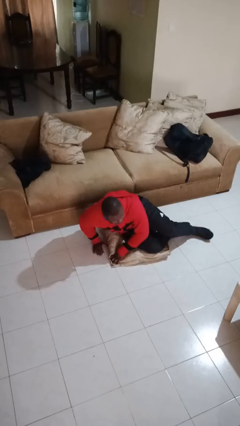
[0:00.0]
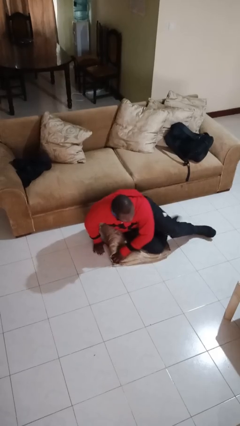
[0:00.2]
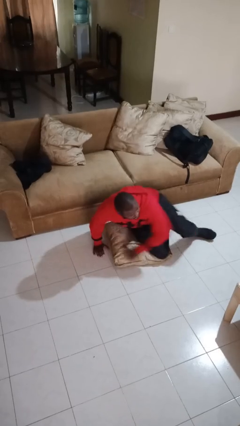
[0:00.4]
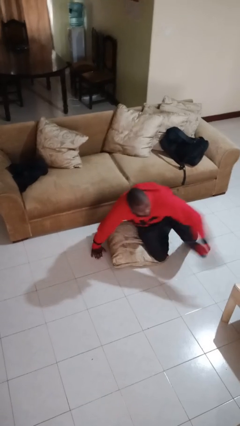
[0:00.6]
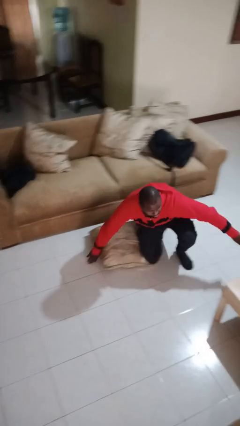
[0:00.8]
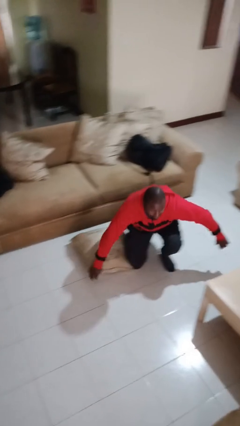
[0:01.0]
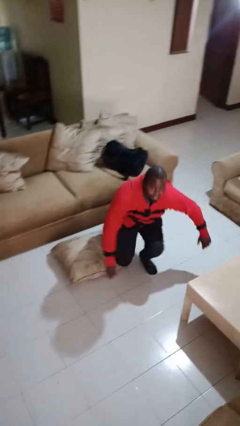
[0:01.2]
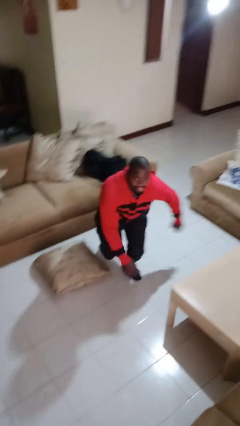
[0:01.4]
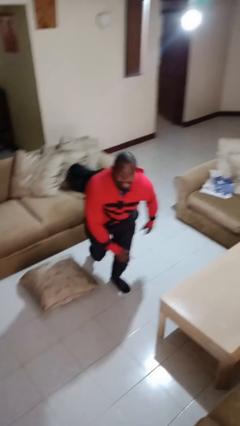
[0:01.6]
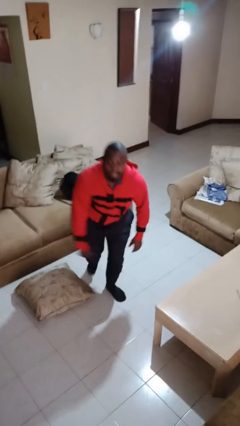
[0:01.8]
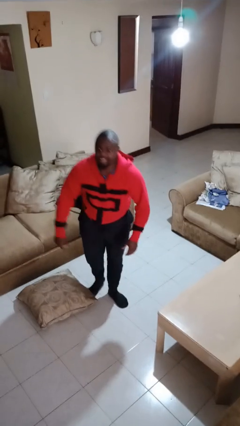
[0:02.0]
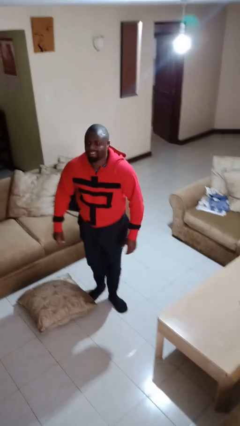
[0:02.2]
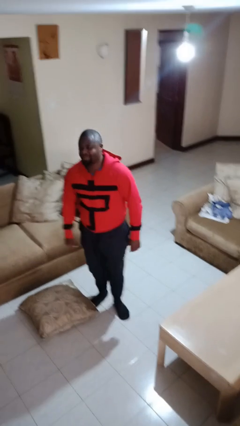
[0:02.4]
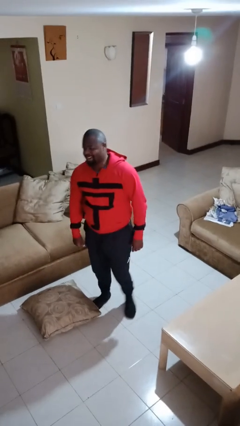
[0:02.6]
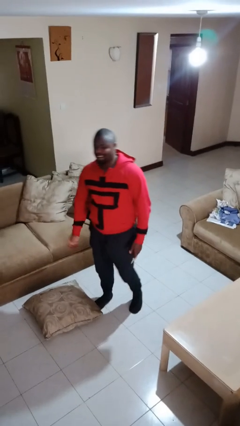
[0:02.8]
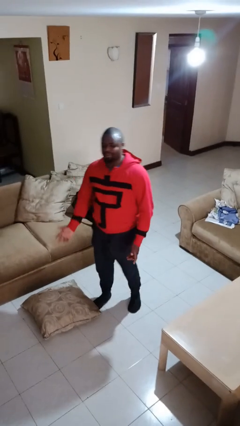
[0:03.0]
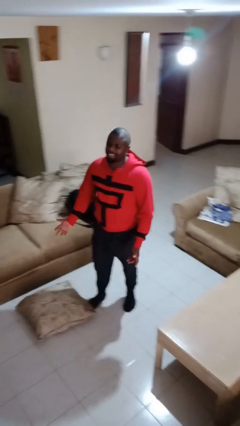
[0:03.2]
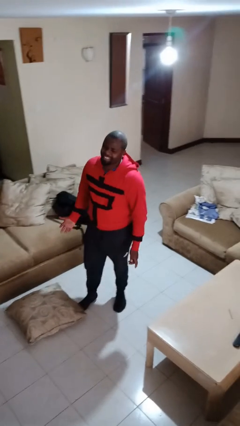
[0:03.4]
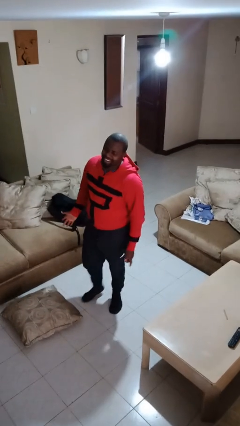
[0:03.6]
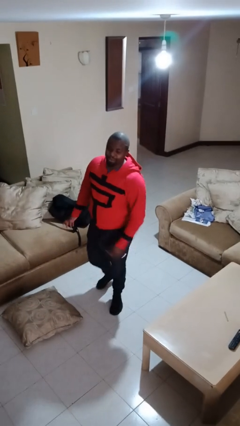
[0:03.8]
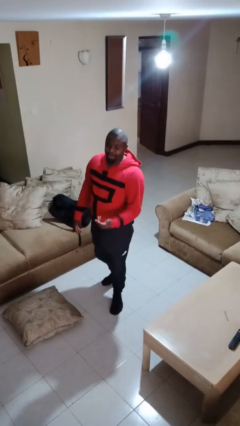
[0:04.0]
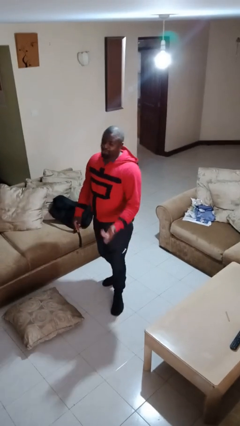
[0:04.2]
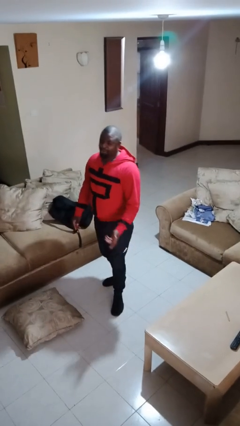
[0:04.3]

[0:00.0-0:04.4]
person stands up from floor

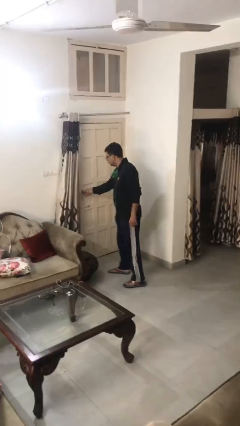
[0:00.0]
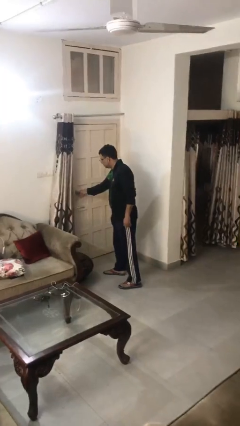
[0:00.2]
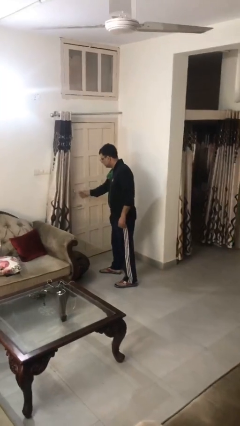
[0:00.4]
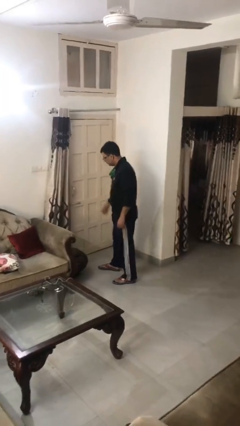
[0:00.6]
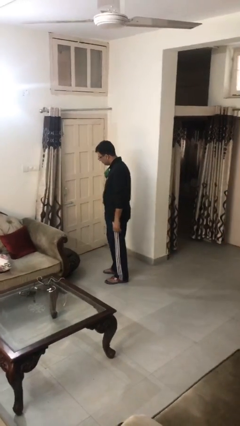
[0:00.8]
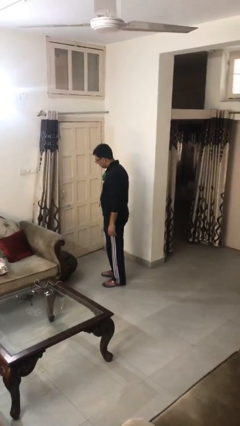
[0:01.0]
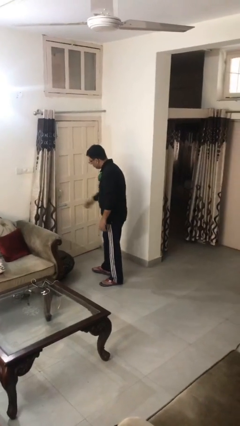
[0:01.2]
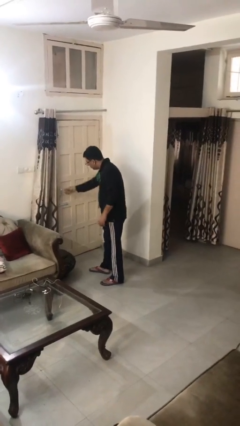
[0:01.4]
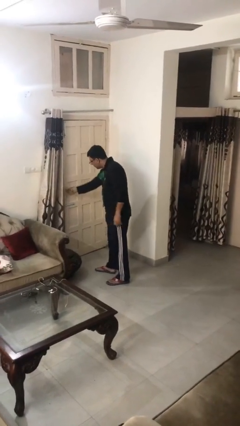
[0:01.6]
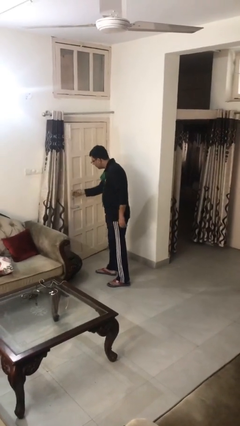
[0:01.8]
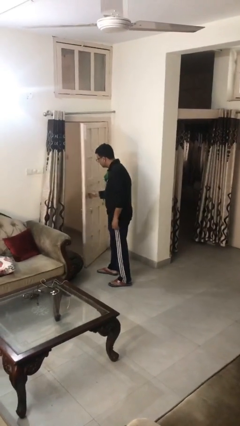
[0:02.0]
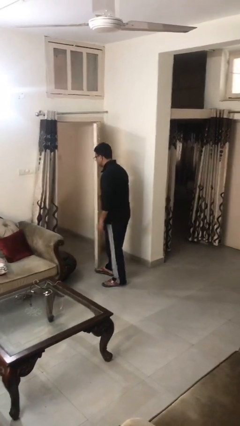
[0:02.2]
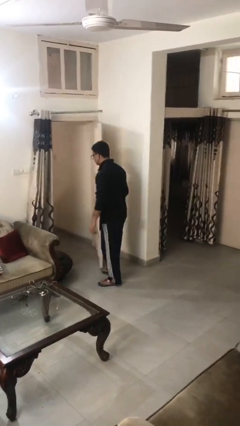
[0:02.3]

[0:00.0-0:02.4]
person opens facility door

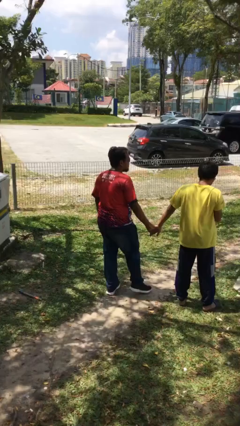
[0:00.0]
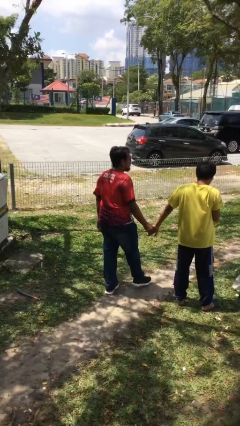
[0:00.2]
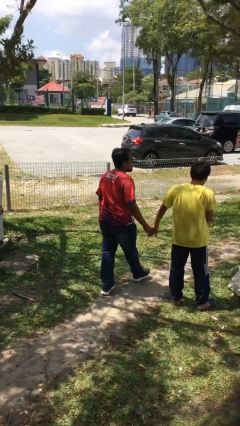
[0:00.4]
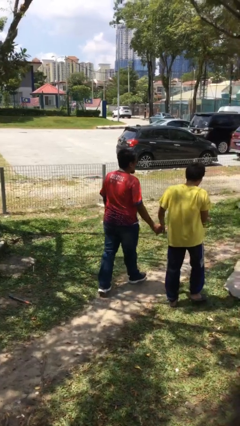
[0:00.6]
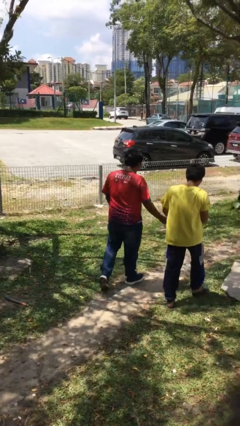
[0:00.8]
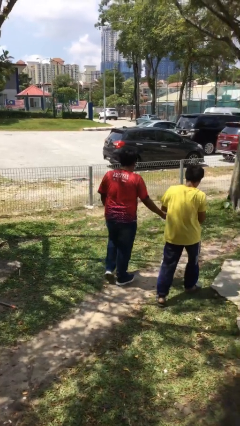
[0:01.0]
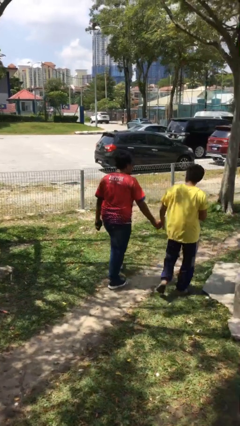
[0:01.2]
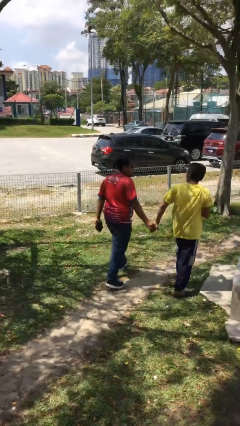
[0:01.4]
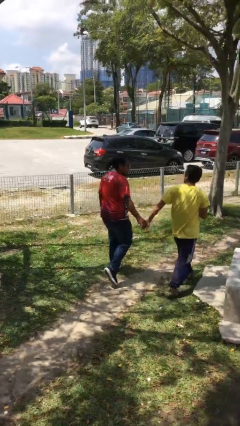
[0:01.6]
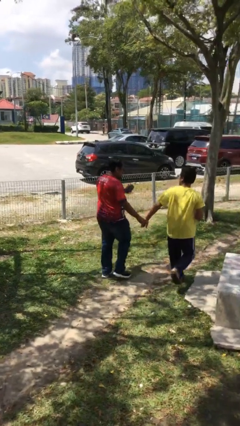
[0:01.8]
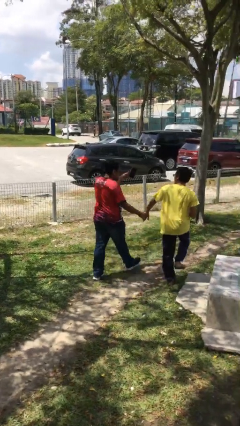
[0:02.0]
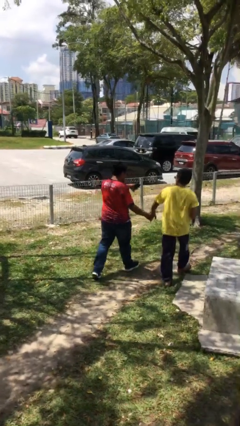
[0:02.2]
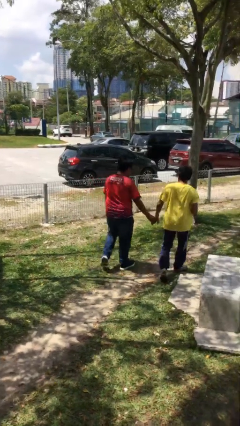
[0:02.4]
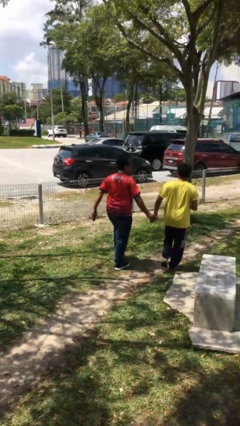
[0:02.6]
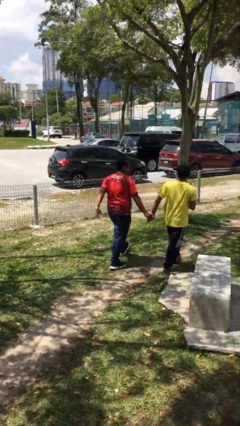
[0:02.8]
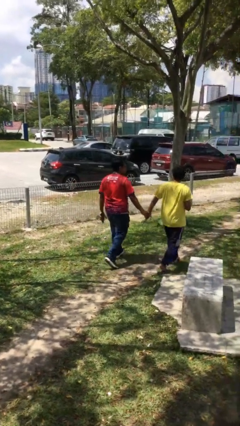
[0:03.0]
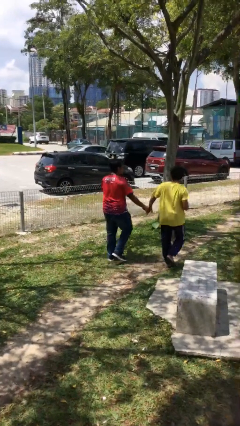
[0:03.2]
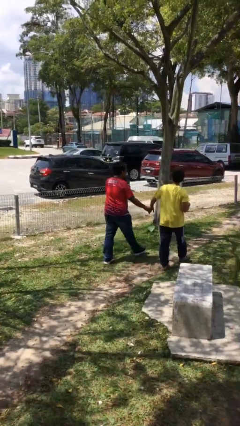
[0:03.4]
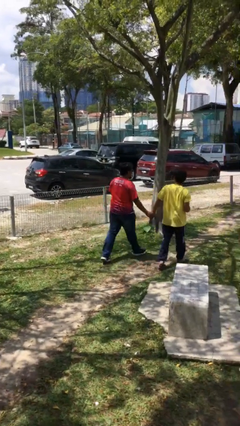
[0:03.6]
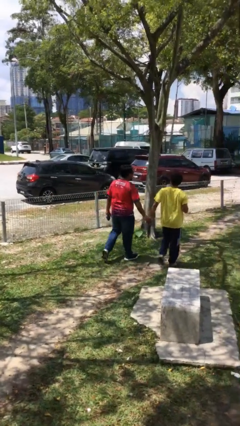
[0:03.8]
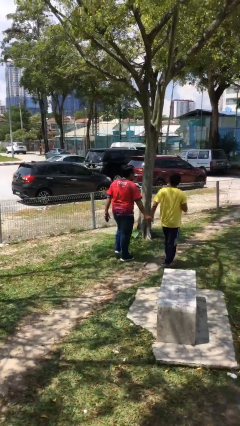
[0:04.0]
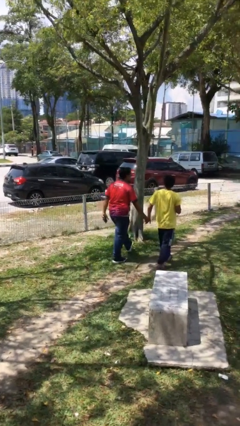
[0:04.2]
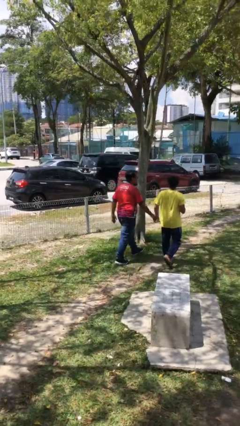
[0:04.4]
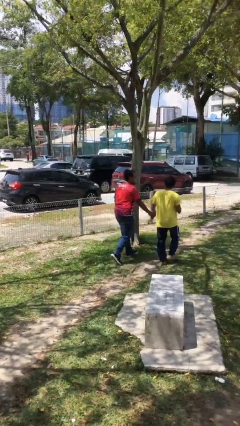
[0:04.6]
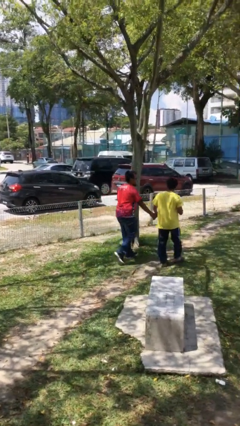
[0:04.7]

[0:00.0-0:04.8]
person holds hand

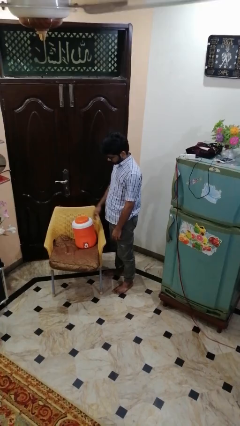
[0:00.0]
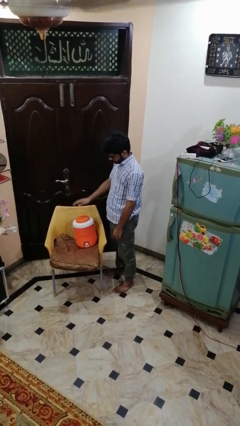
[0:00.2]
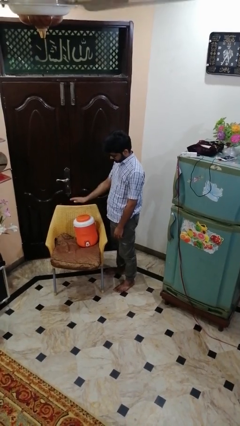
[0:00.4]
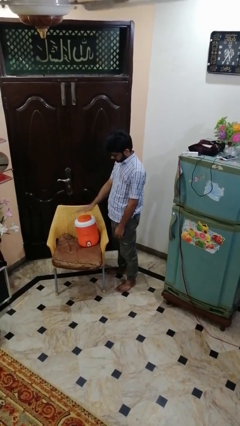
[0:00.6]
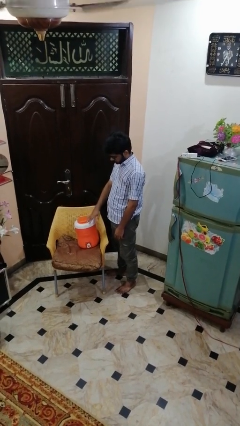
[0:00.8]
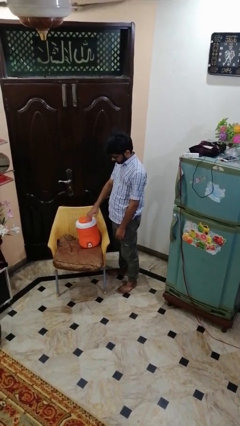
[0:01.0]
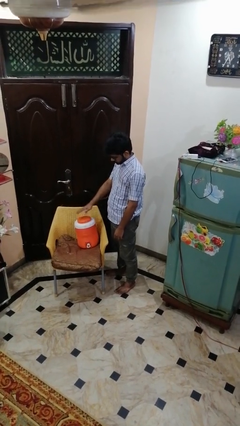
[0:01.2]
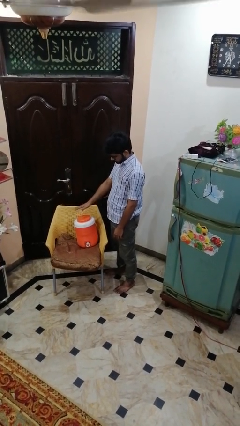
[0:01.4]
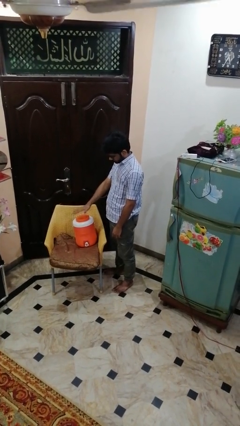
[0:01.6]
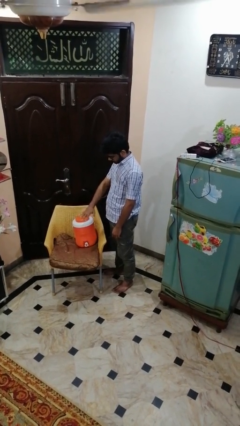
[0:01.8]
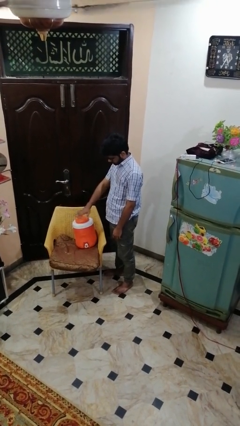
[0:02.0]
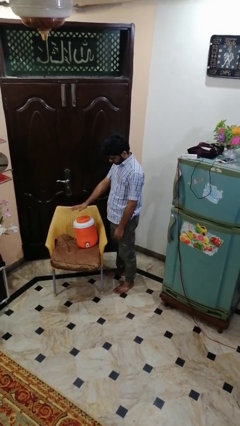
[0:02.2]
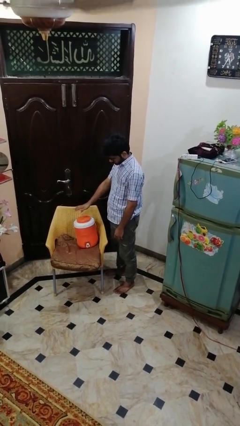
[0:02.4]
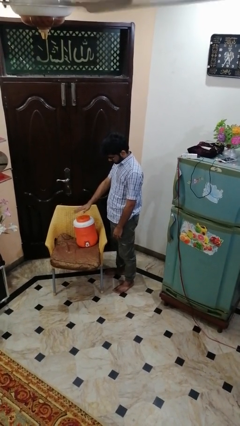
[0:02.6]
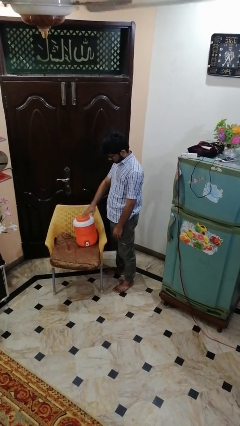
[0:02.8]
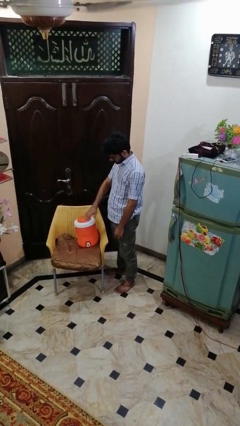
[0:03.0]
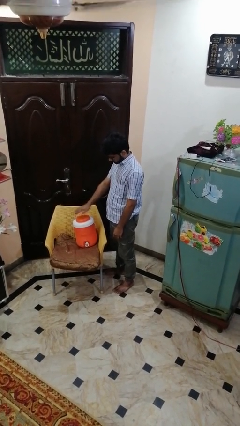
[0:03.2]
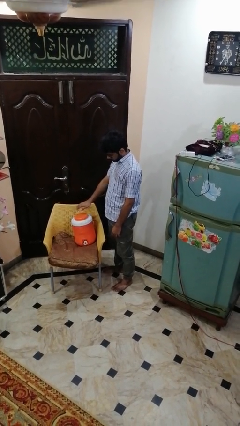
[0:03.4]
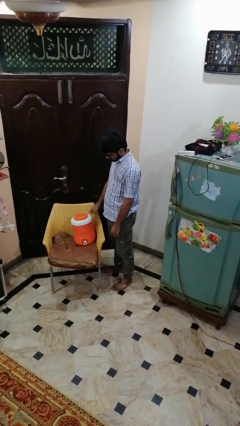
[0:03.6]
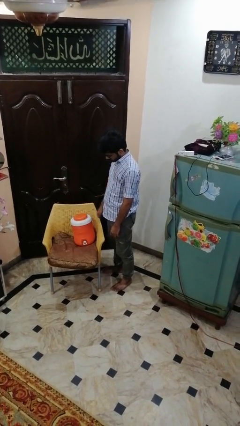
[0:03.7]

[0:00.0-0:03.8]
person waves hand over object

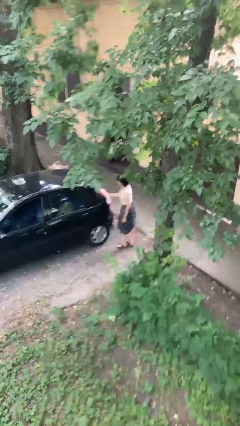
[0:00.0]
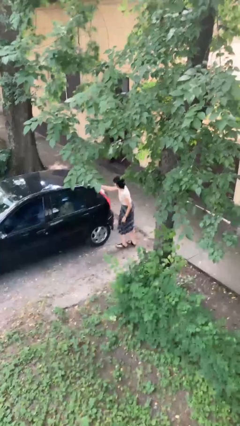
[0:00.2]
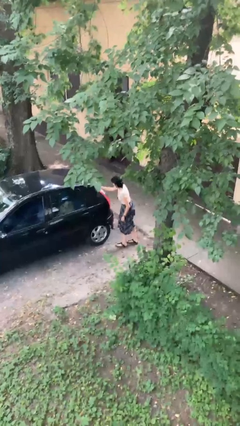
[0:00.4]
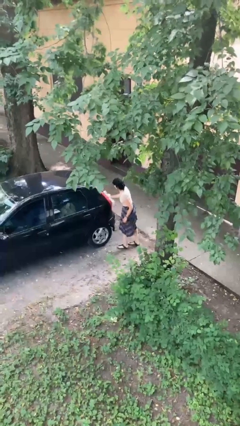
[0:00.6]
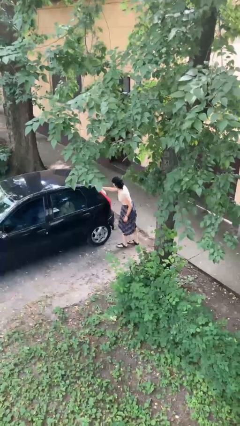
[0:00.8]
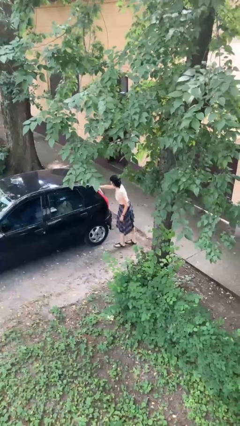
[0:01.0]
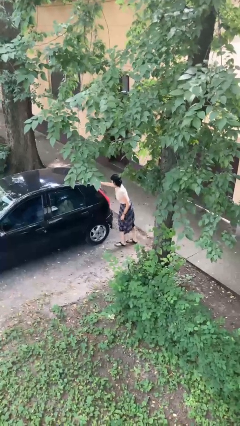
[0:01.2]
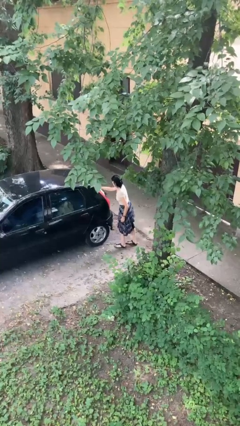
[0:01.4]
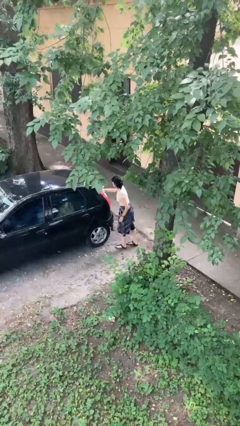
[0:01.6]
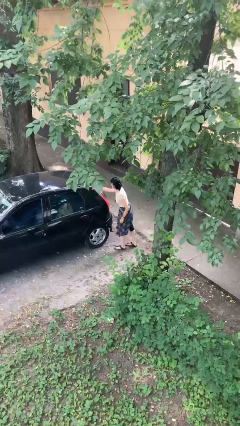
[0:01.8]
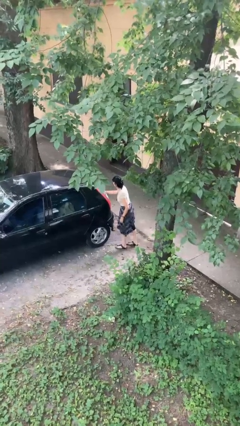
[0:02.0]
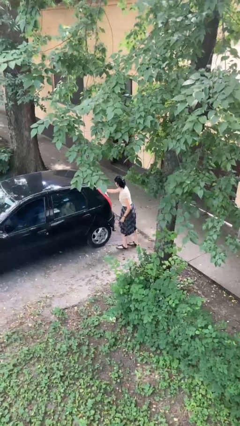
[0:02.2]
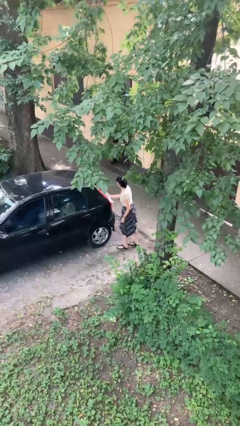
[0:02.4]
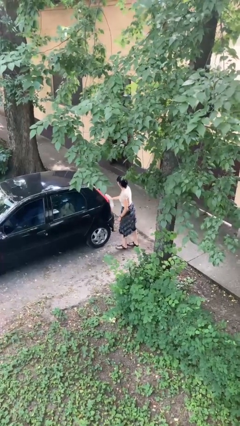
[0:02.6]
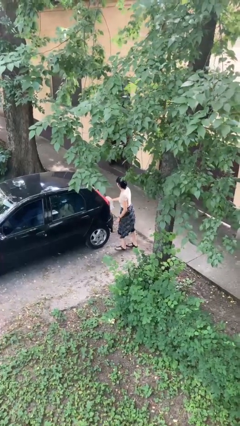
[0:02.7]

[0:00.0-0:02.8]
person polishes car with rag
